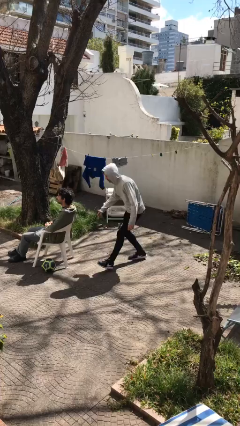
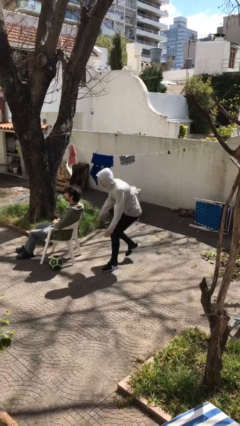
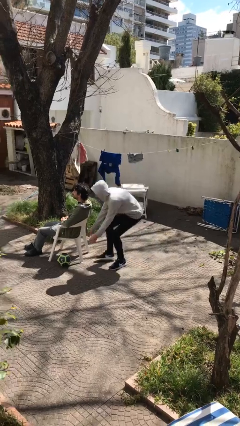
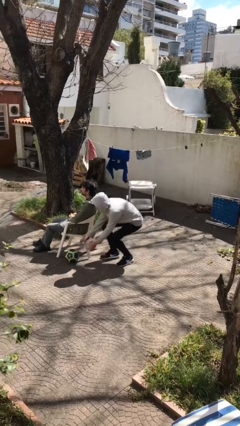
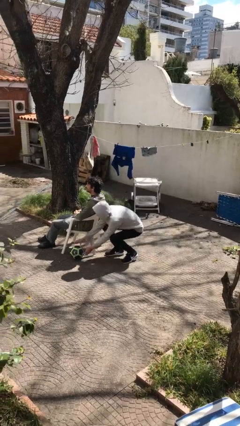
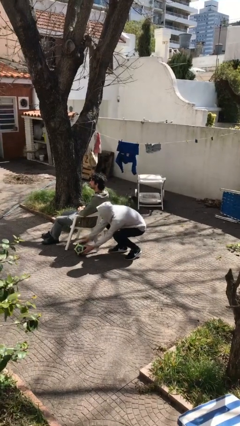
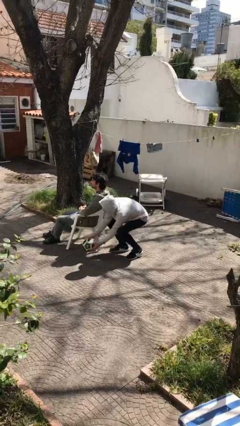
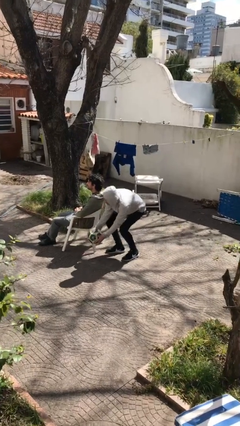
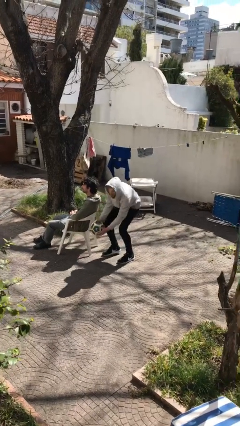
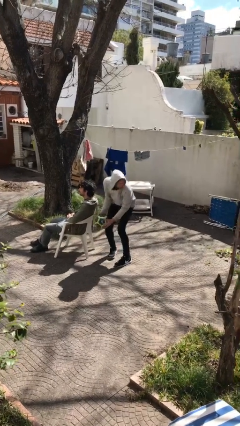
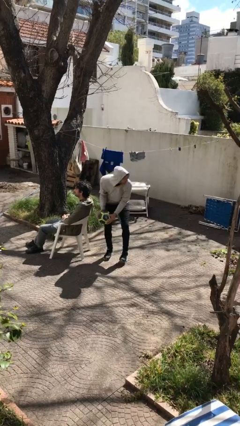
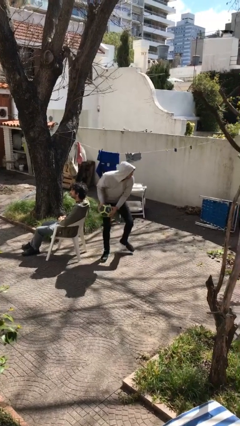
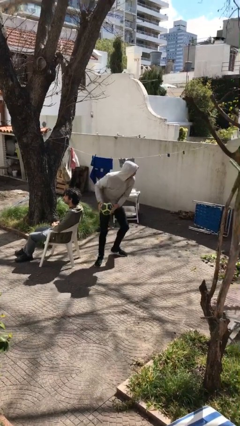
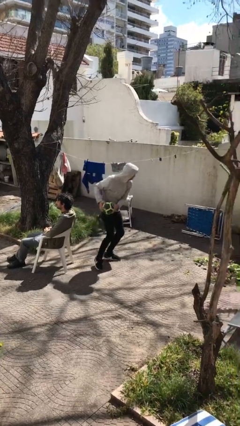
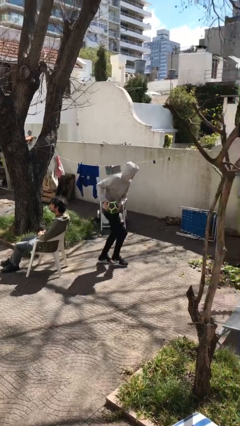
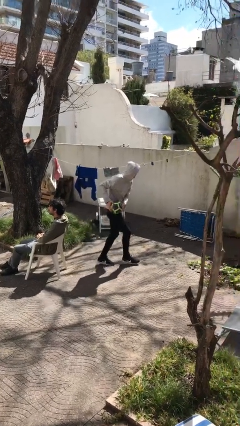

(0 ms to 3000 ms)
person steals object from person

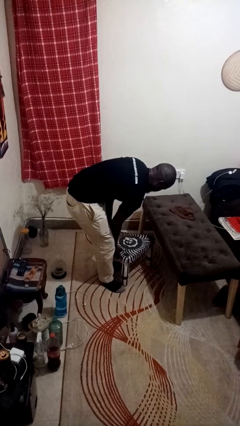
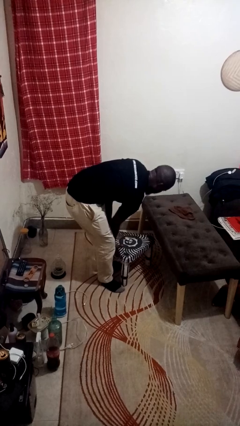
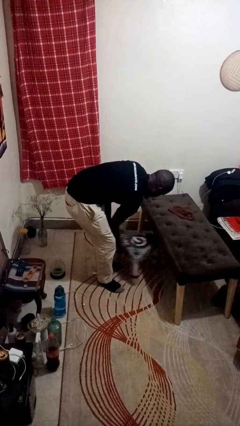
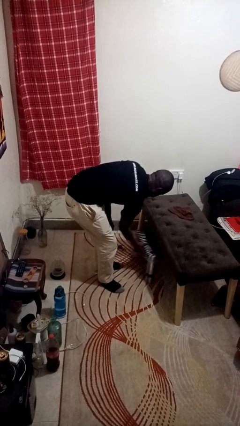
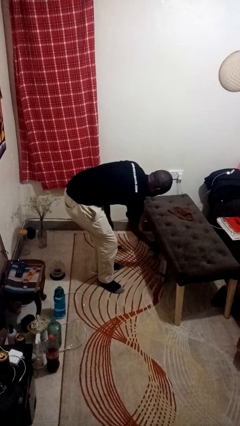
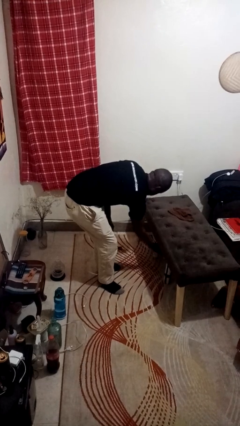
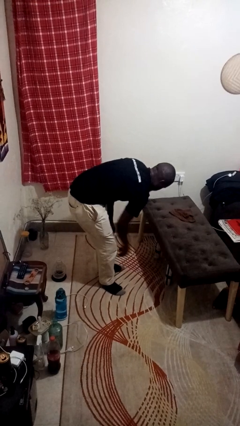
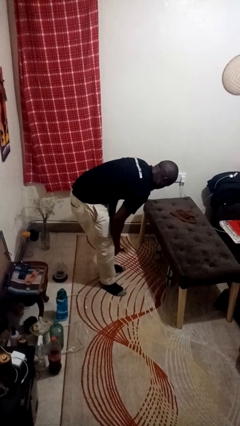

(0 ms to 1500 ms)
person pushes in chair

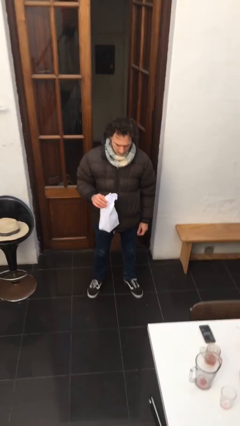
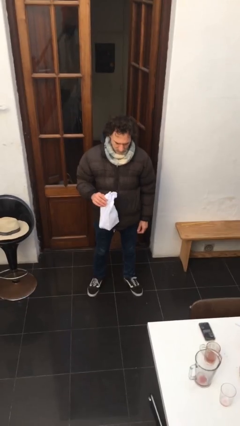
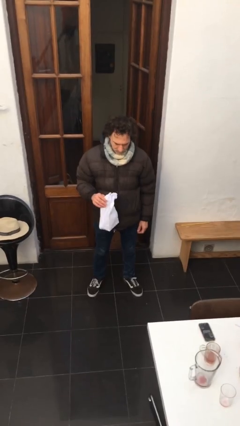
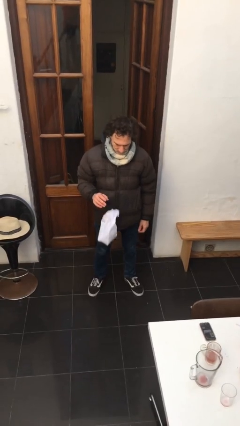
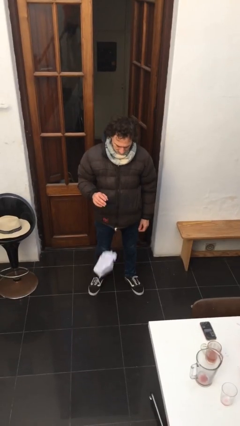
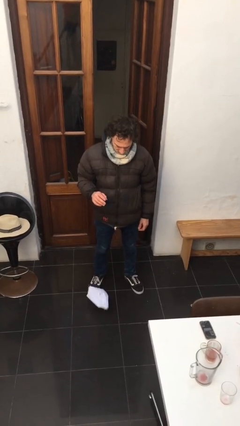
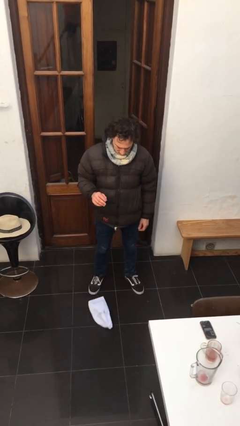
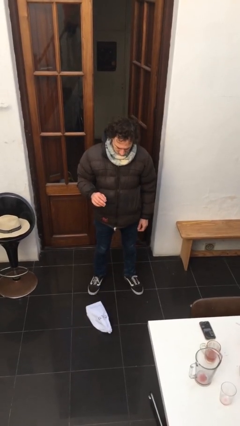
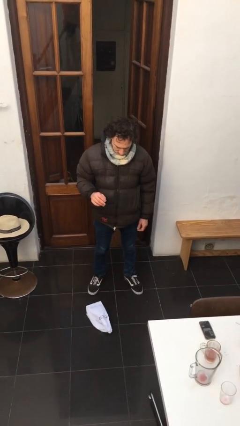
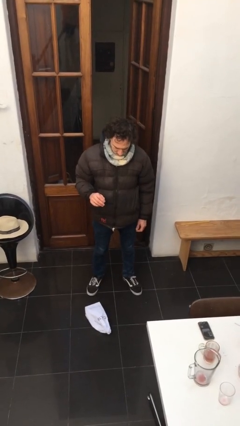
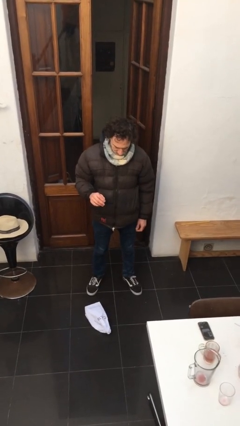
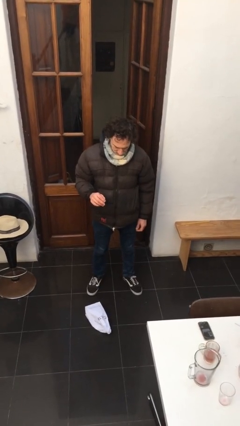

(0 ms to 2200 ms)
person drops object

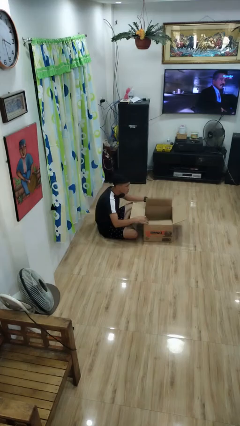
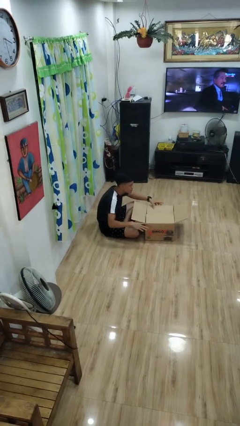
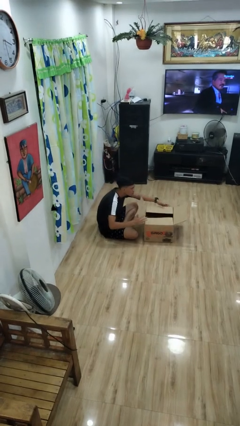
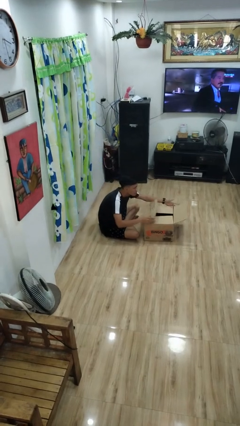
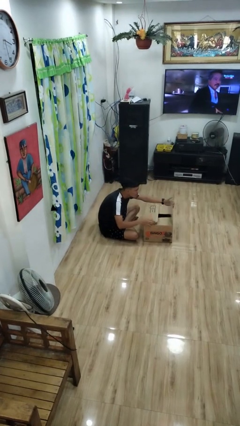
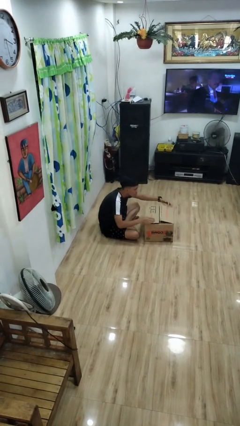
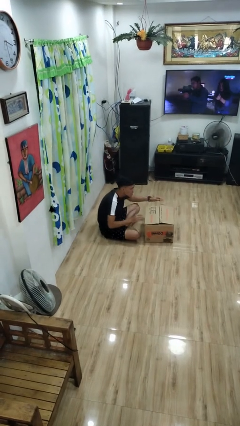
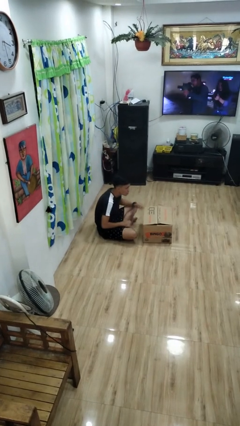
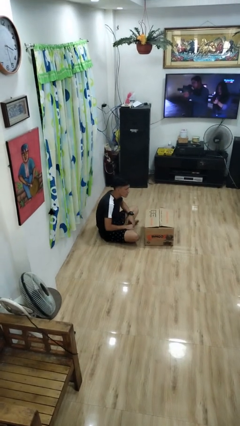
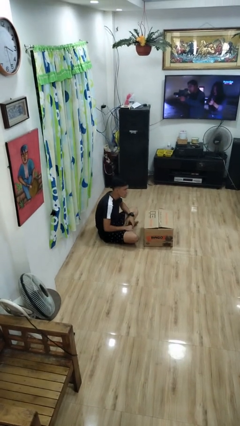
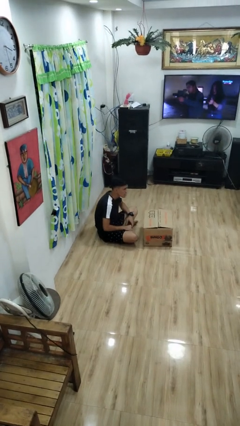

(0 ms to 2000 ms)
person closes box

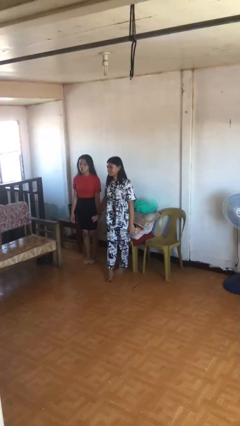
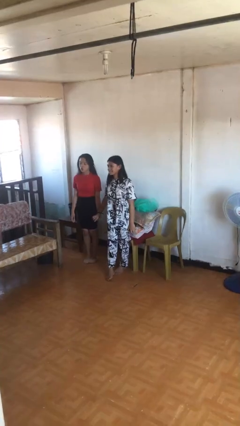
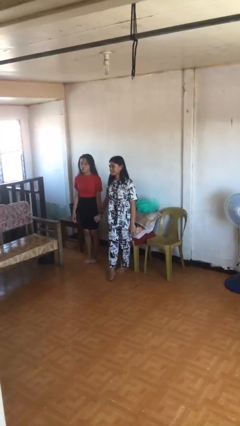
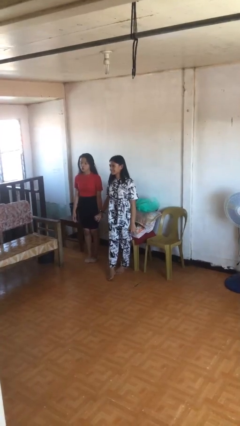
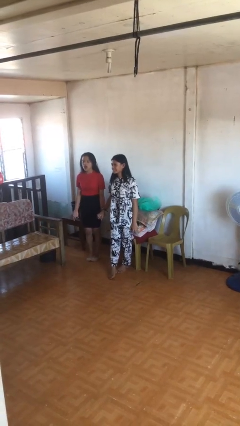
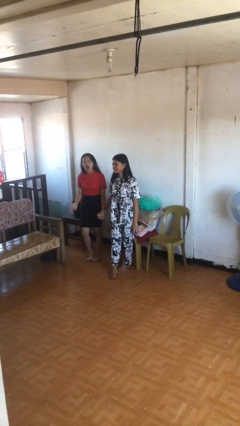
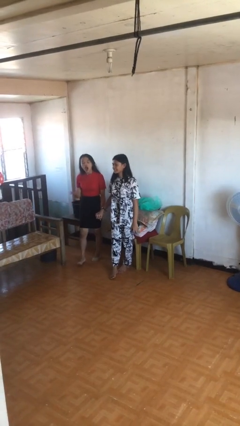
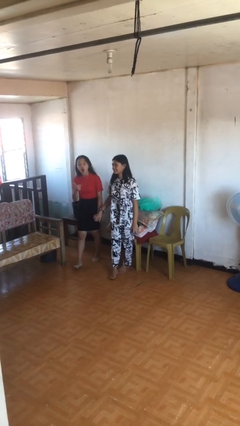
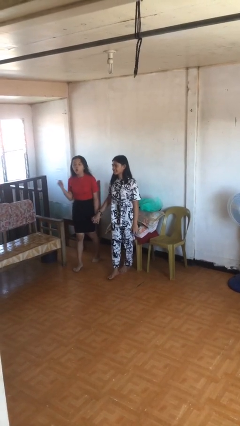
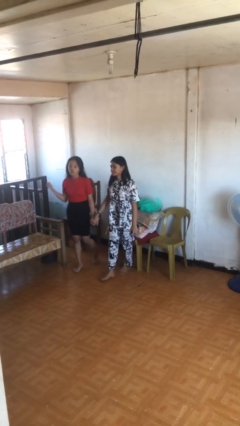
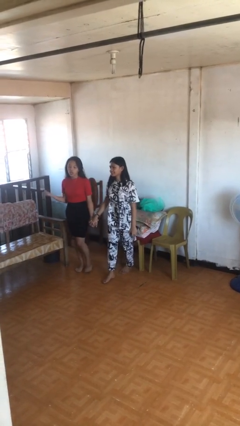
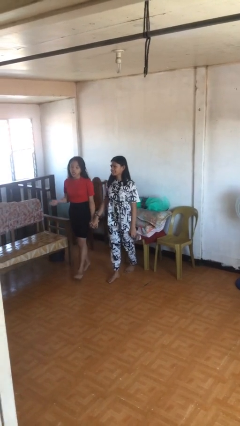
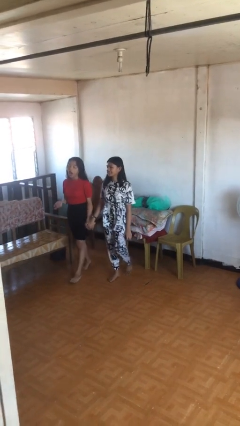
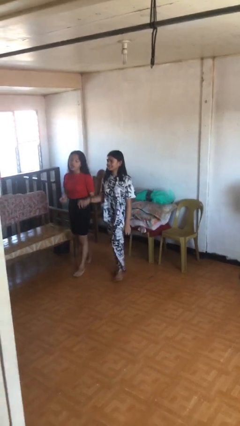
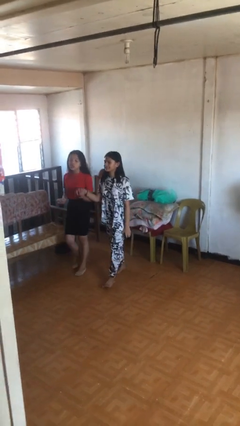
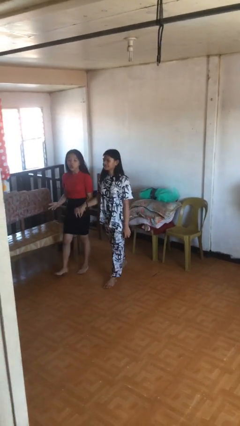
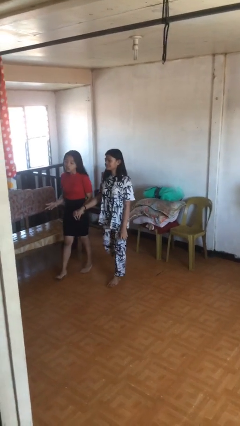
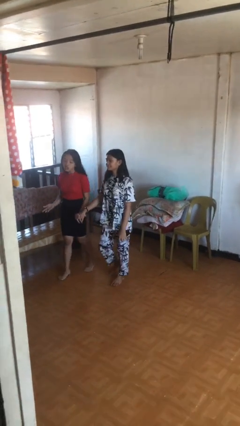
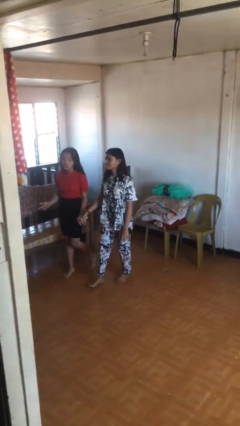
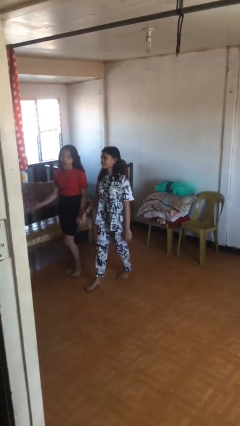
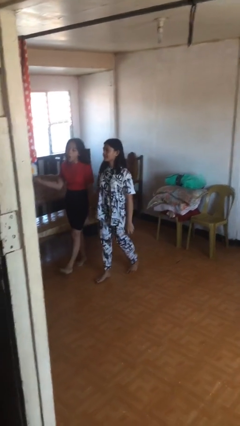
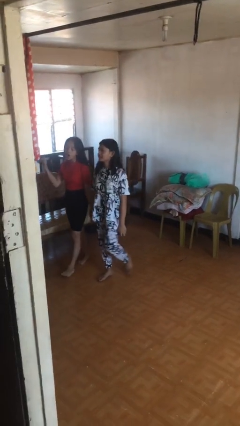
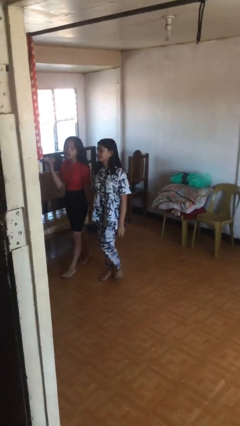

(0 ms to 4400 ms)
person holds hand

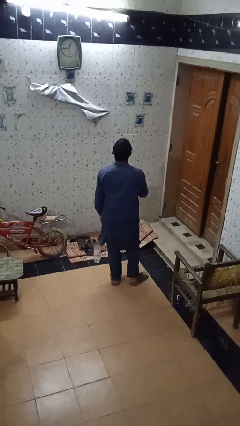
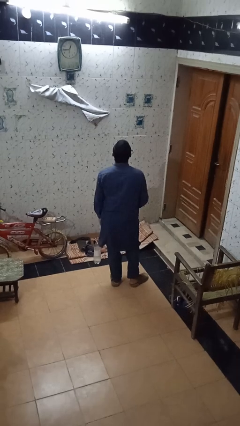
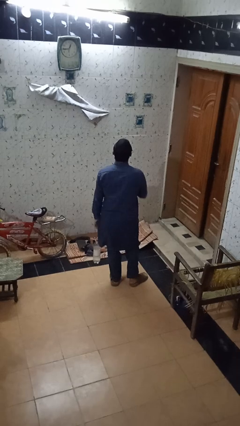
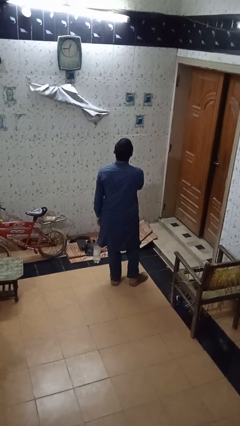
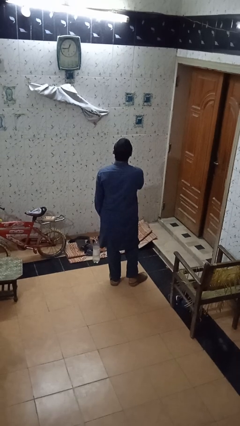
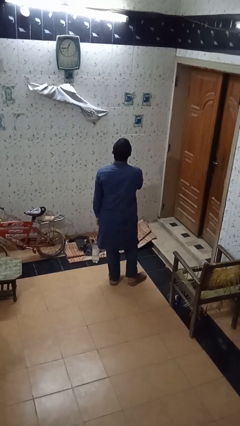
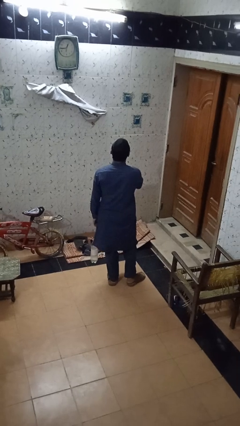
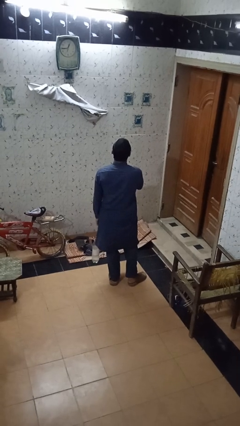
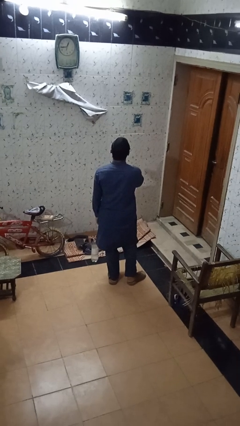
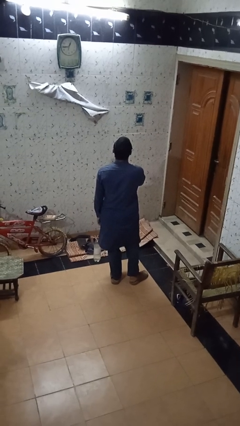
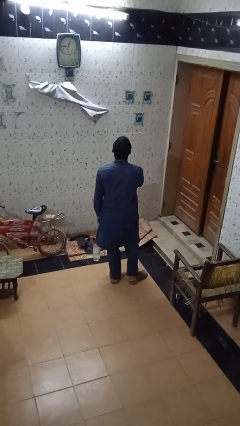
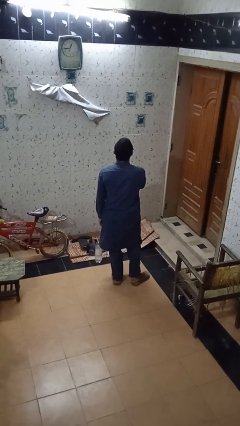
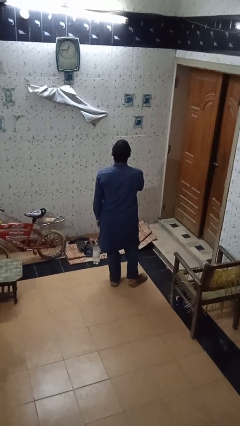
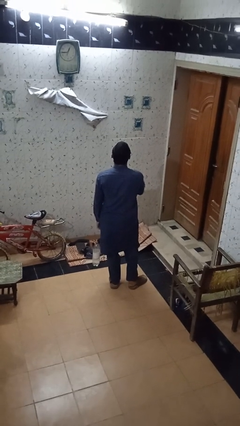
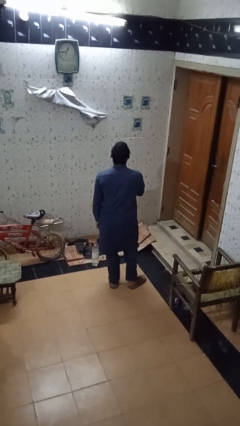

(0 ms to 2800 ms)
person drums on chest

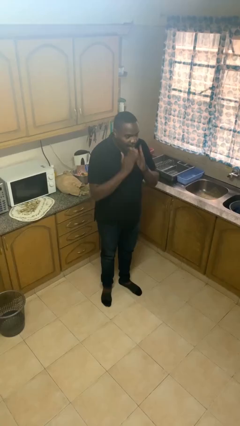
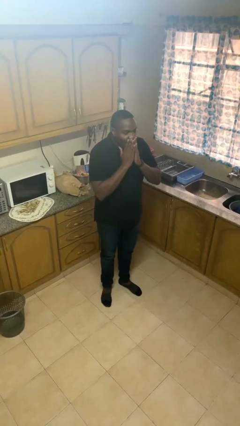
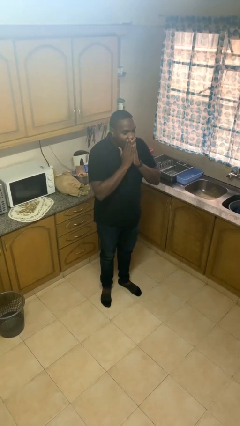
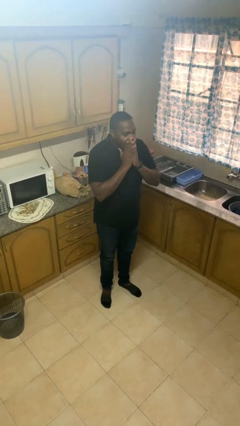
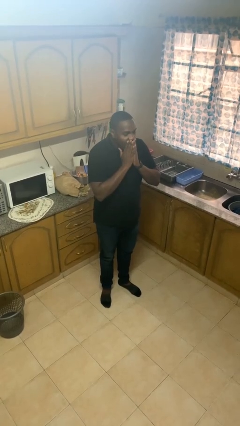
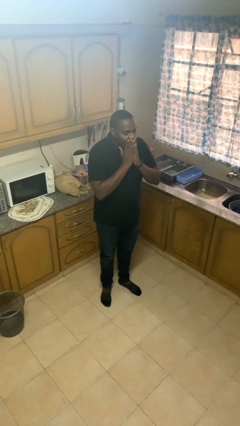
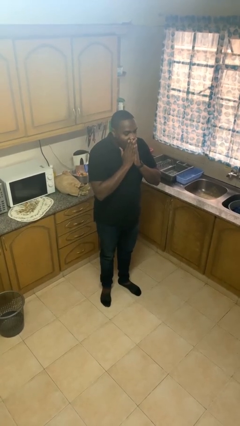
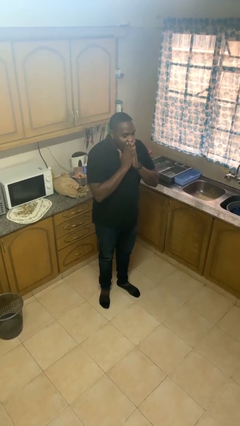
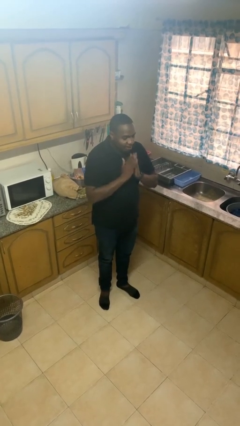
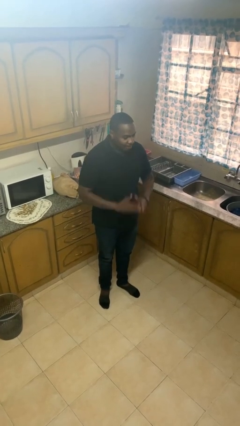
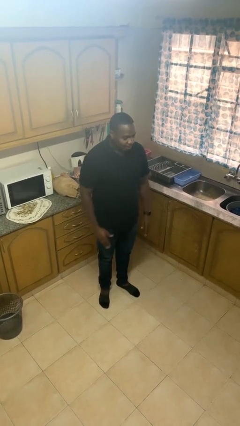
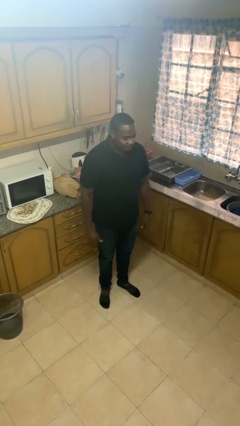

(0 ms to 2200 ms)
person yawns
